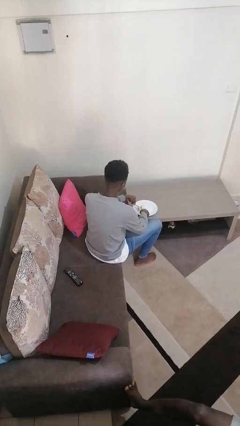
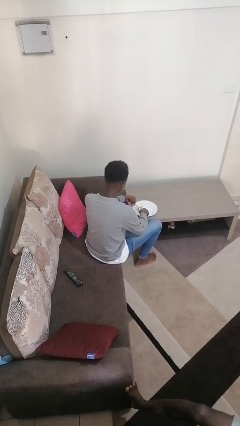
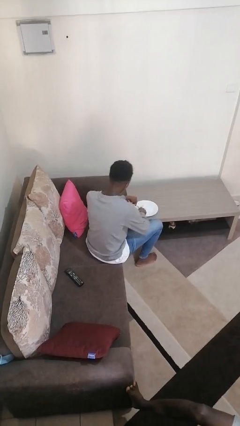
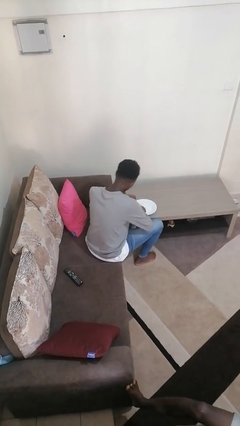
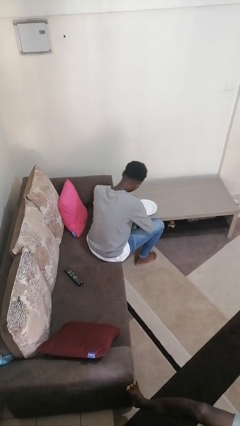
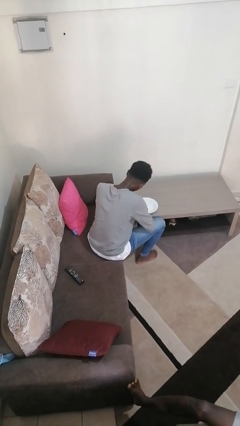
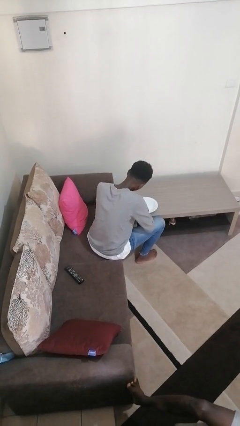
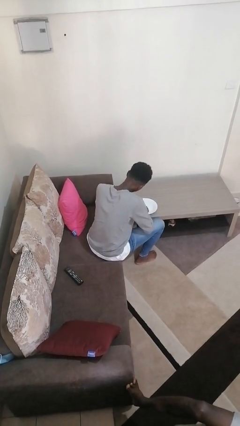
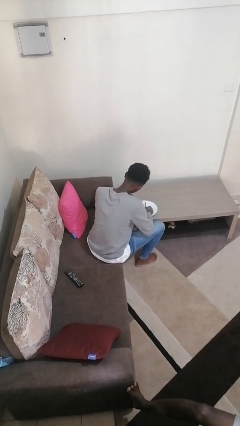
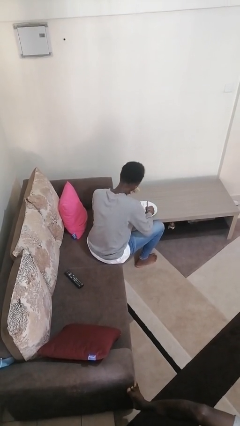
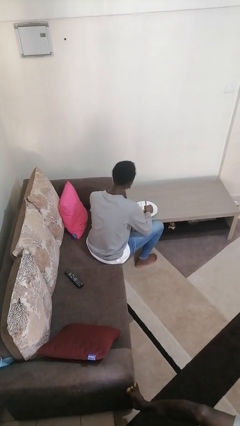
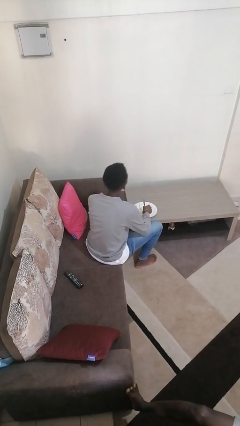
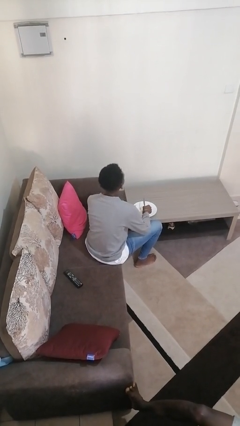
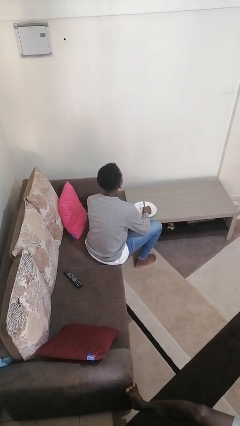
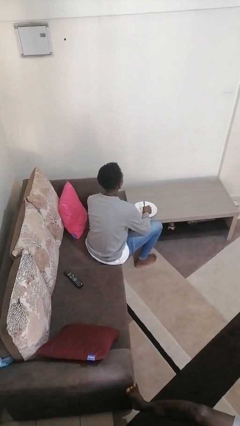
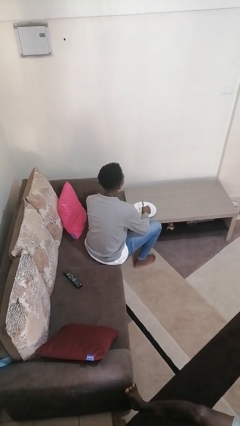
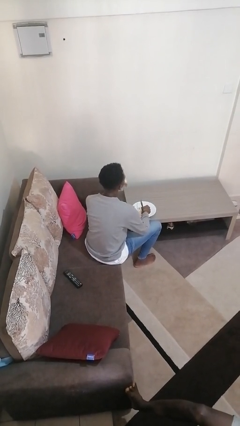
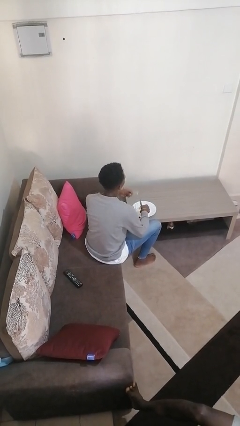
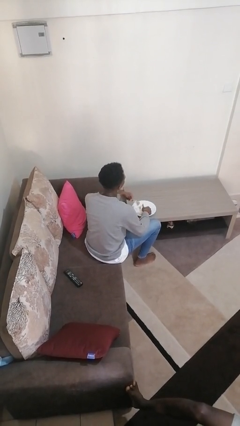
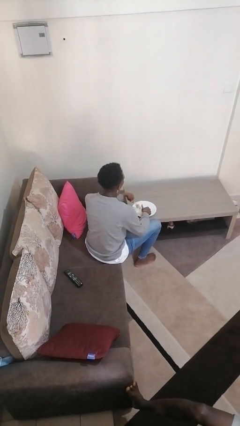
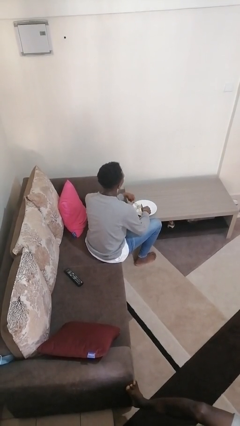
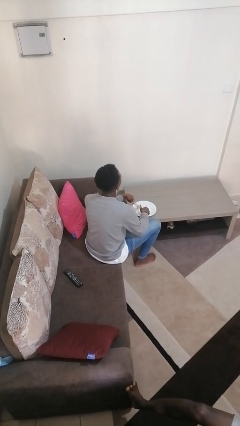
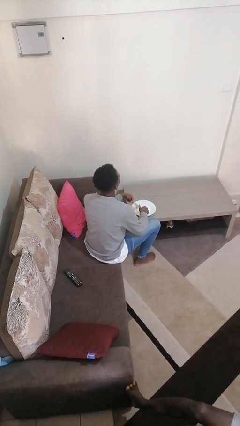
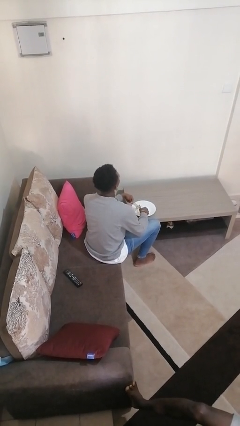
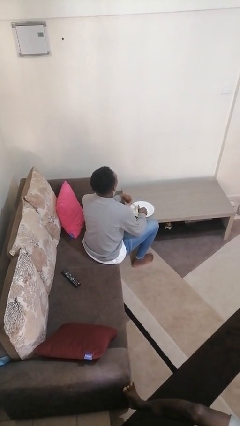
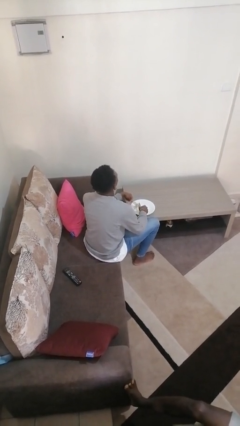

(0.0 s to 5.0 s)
person eats with utensil

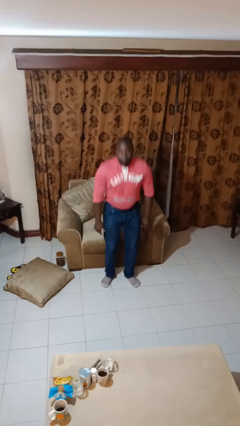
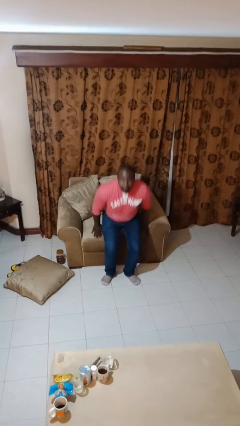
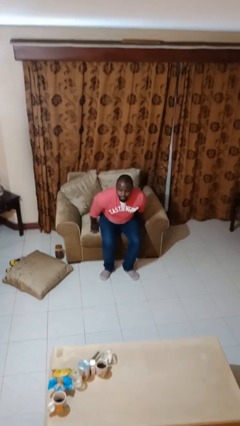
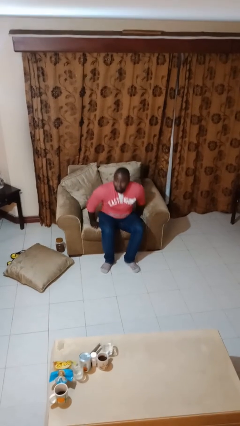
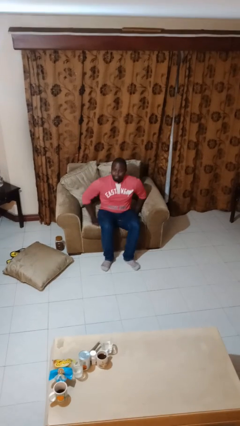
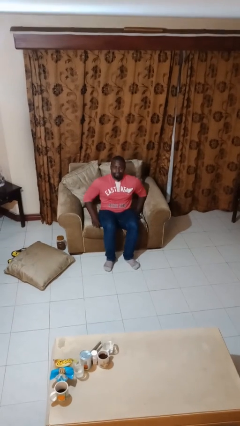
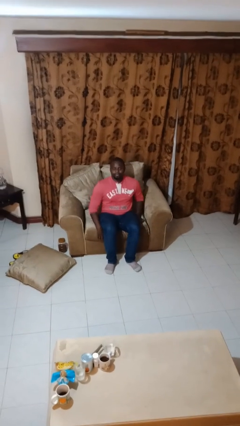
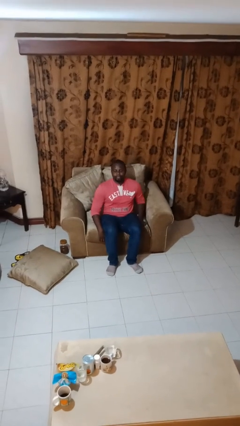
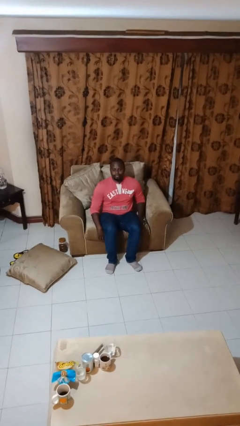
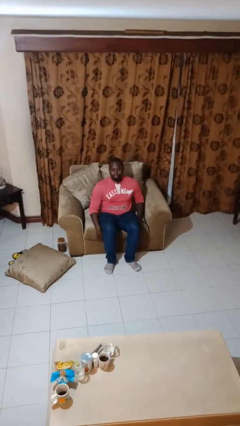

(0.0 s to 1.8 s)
person sits down

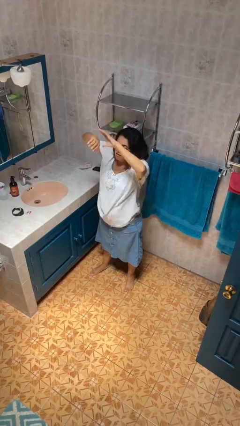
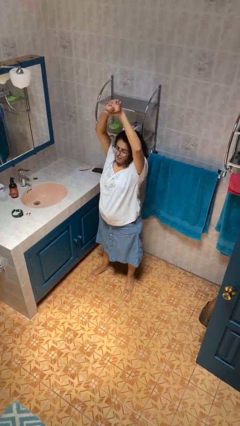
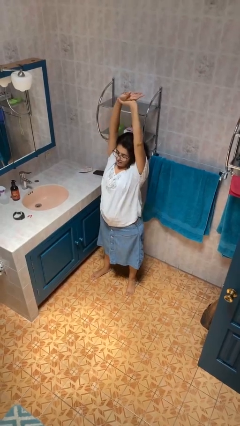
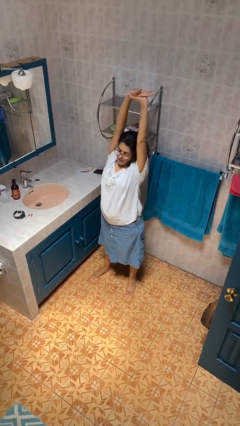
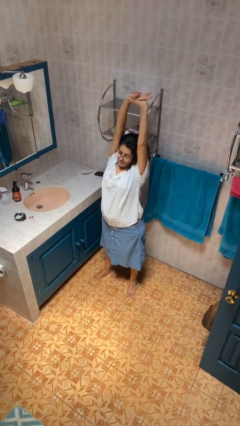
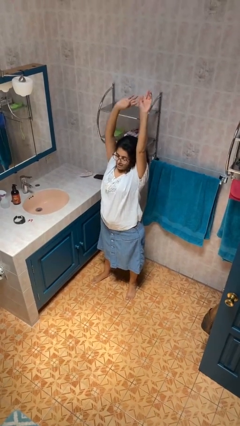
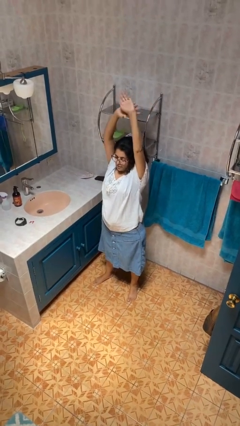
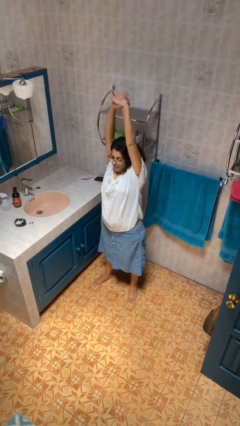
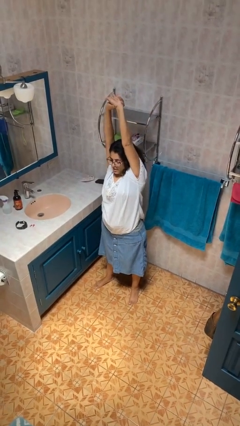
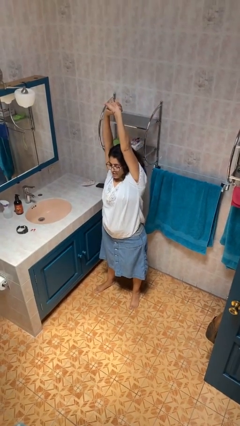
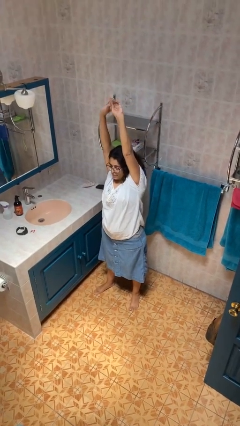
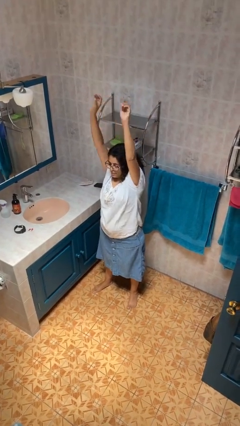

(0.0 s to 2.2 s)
person stretches arms over head

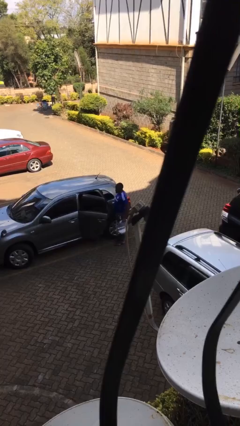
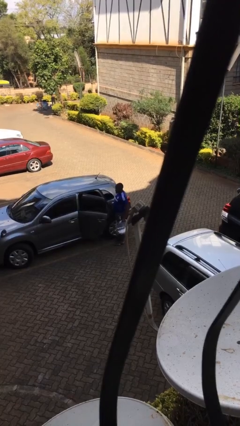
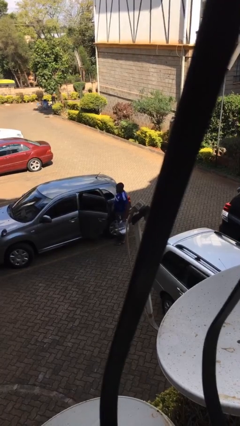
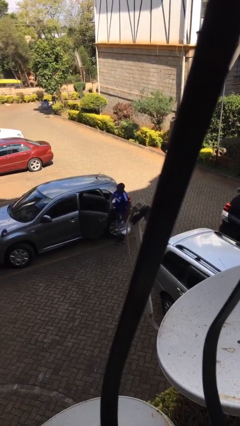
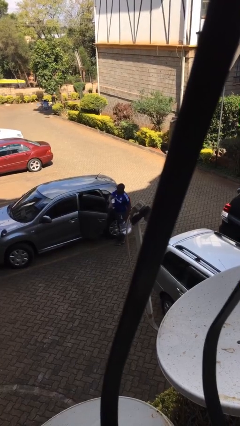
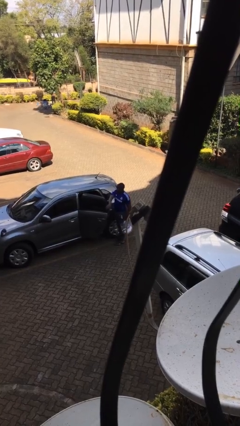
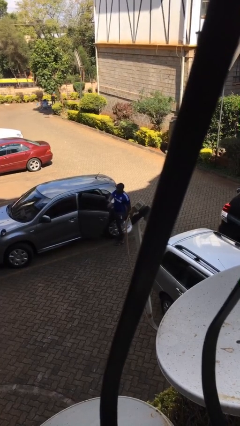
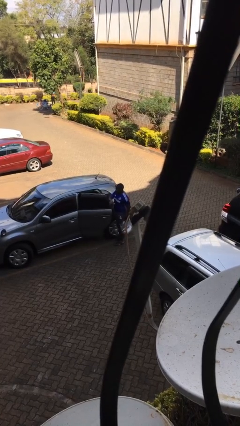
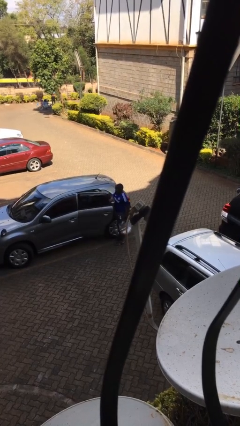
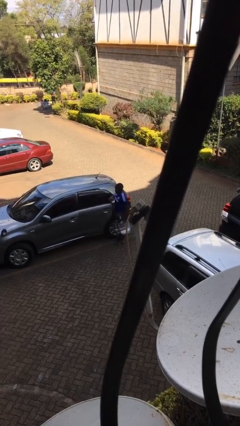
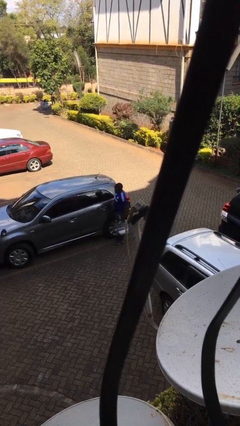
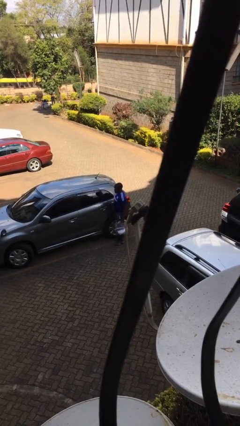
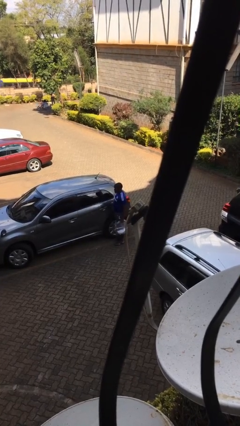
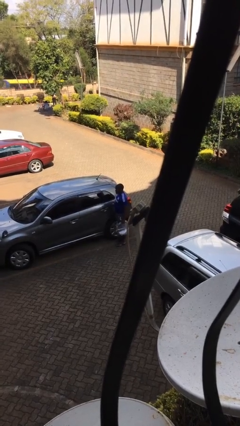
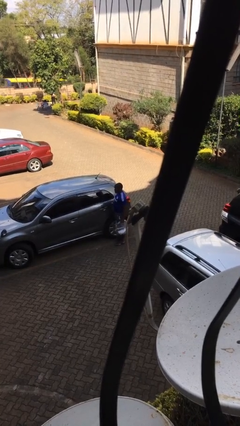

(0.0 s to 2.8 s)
person closes car door

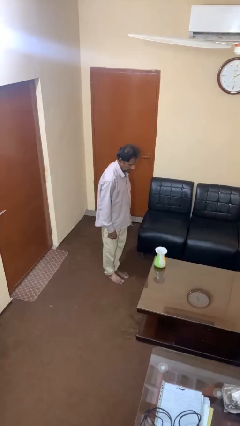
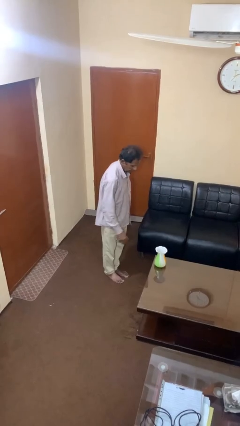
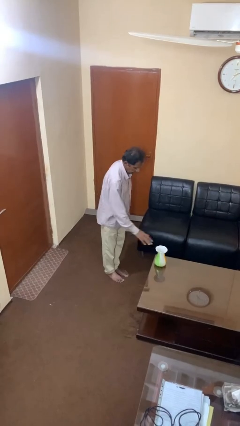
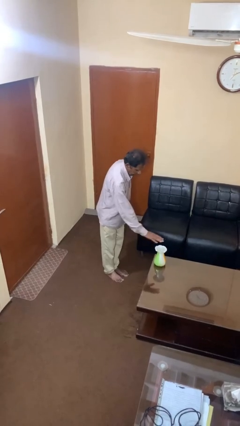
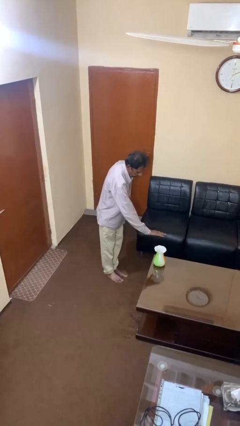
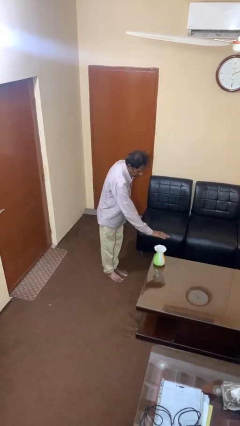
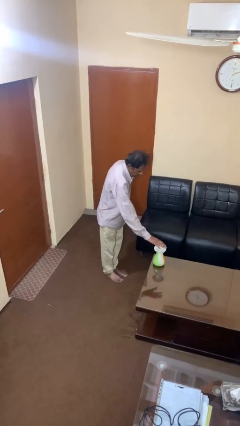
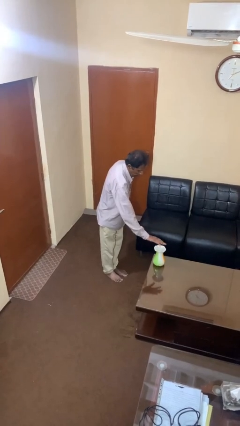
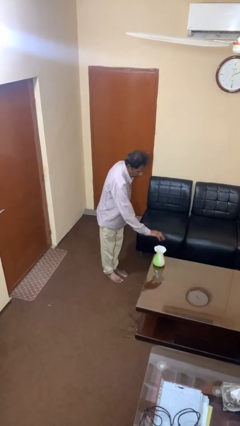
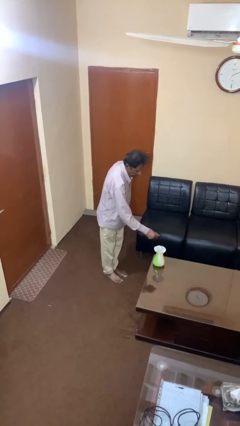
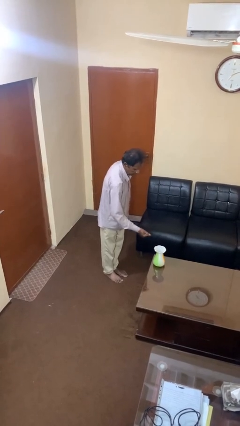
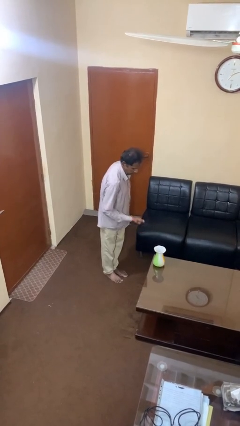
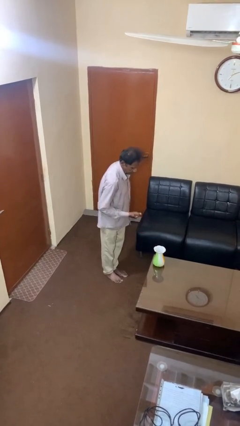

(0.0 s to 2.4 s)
person waves hand over object

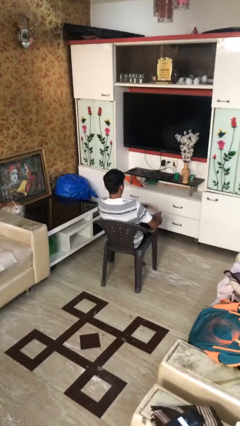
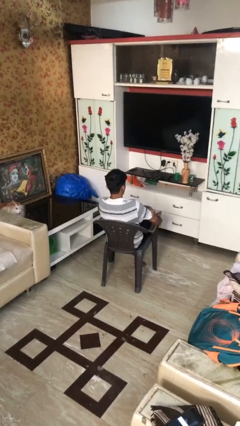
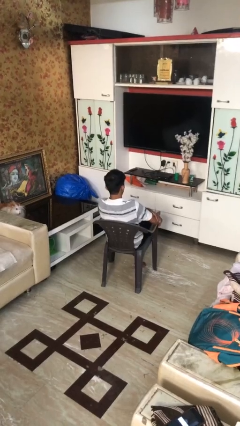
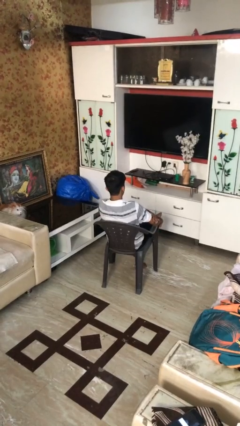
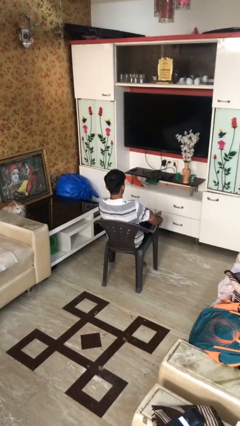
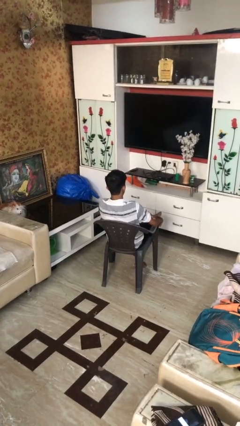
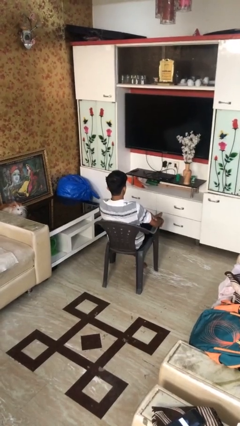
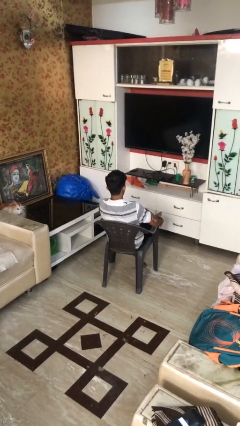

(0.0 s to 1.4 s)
person swats bug

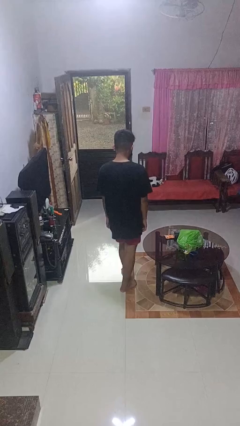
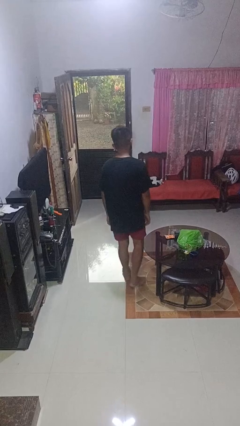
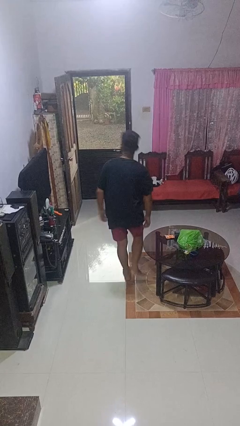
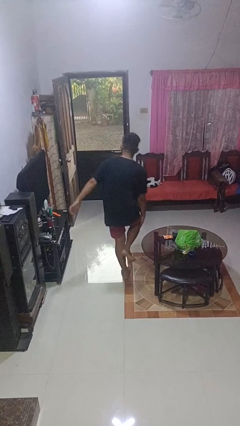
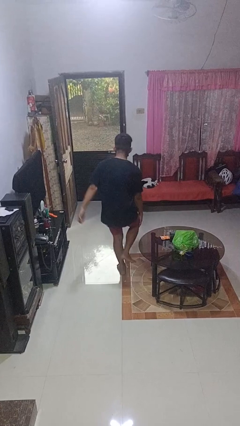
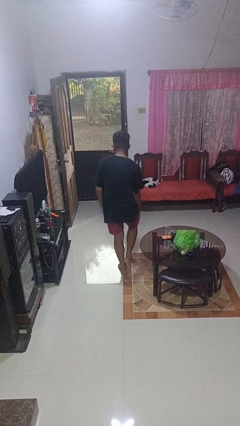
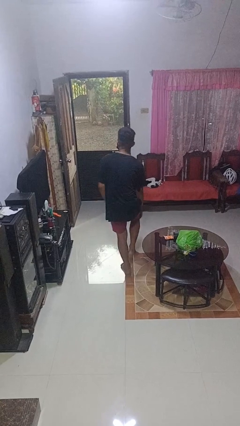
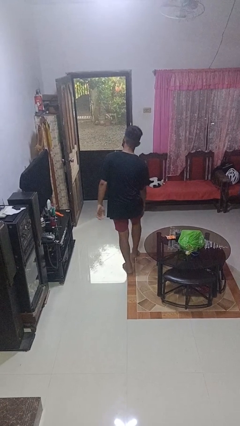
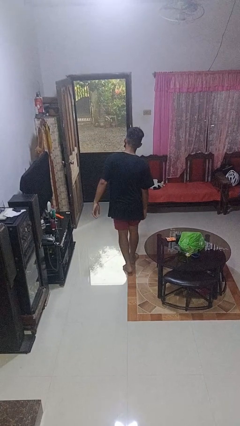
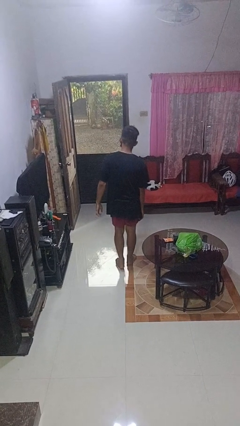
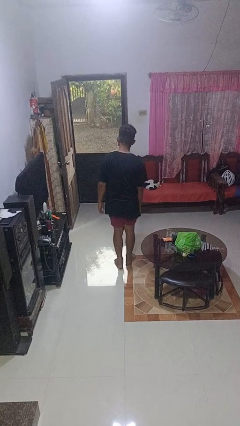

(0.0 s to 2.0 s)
person bumps into table
